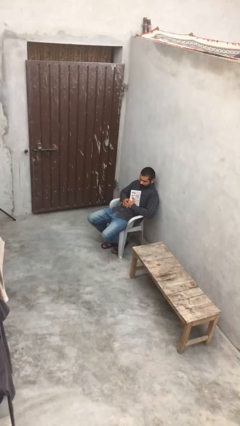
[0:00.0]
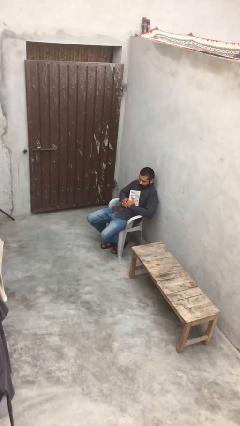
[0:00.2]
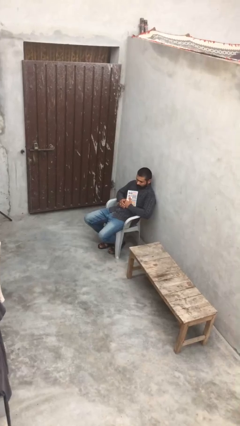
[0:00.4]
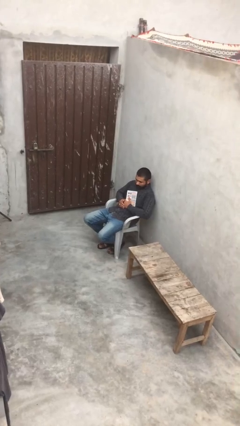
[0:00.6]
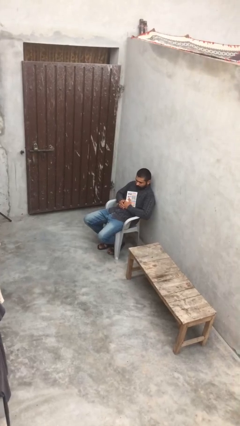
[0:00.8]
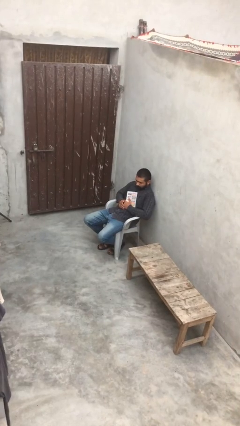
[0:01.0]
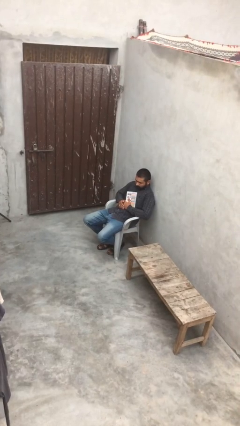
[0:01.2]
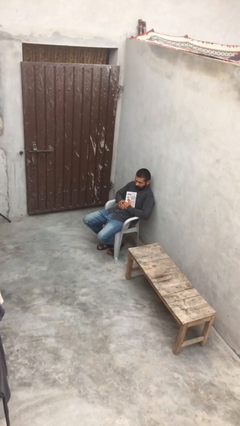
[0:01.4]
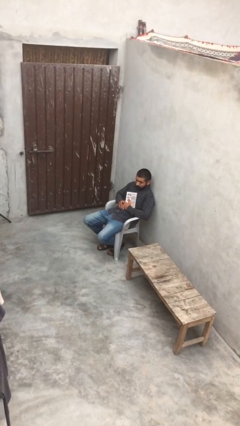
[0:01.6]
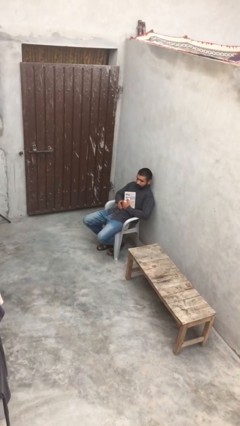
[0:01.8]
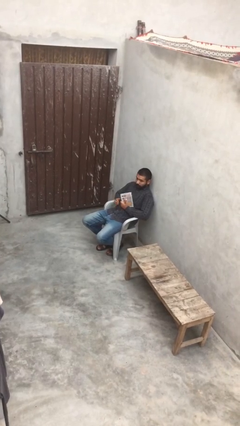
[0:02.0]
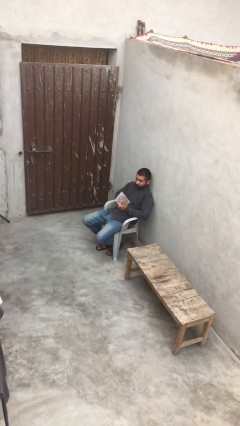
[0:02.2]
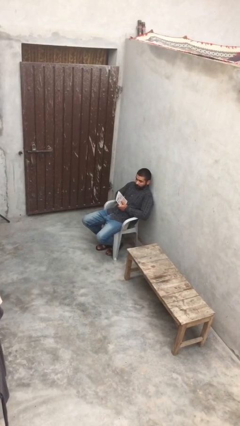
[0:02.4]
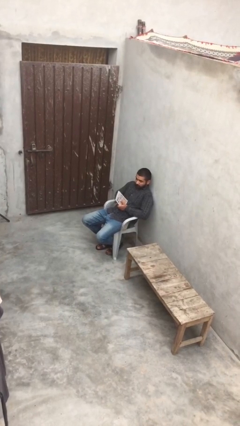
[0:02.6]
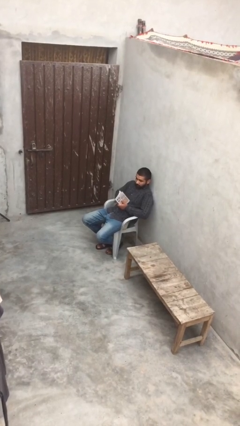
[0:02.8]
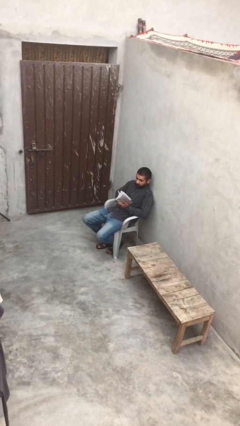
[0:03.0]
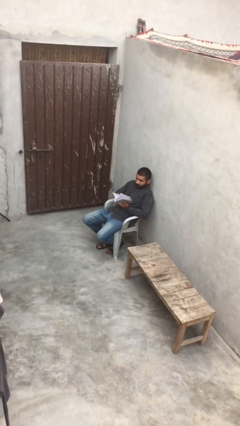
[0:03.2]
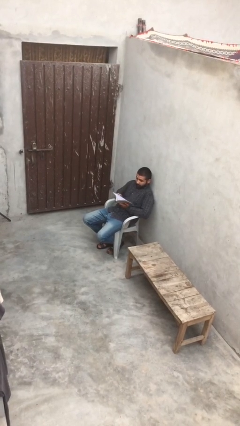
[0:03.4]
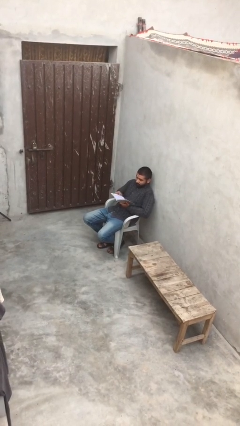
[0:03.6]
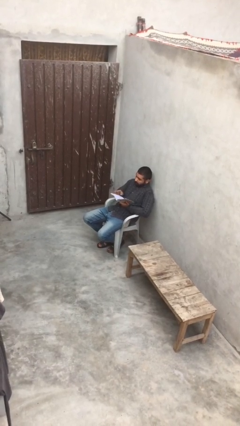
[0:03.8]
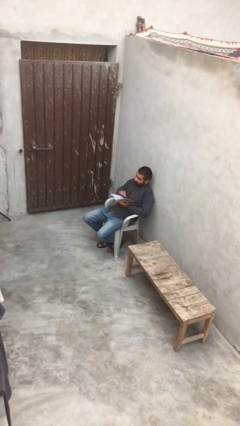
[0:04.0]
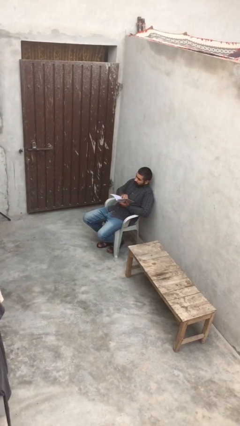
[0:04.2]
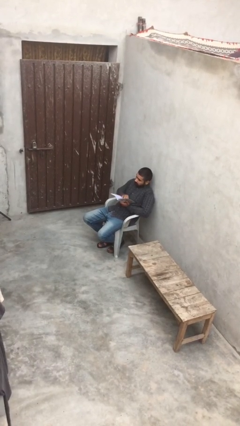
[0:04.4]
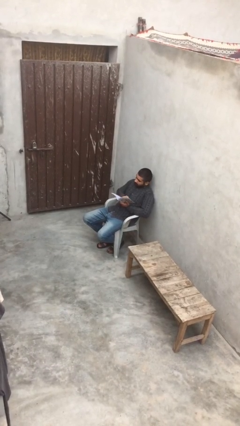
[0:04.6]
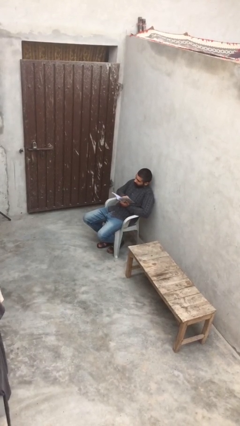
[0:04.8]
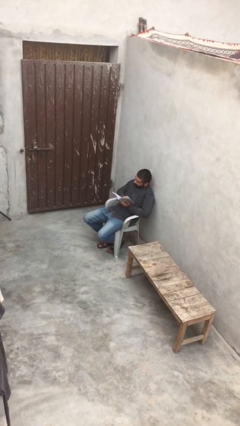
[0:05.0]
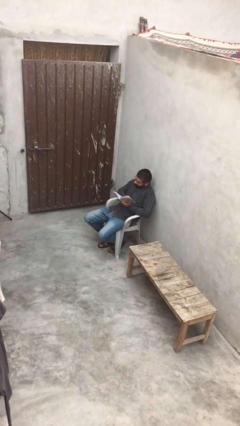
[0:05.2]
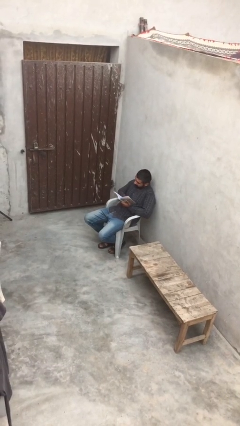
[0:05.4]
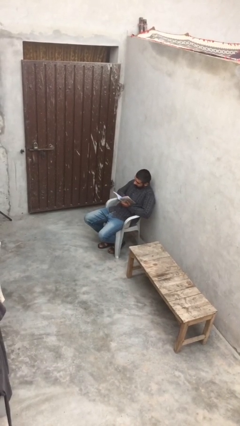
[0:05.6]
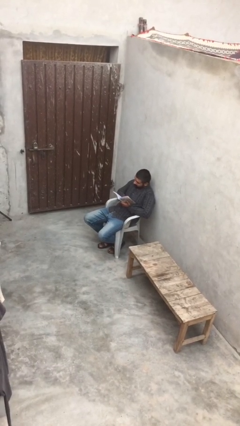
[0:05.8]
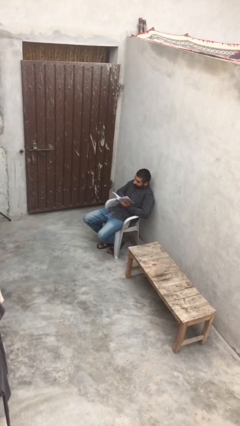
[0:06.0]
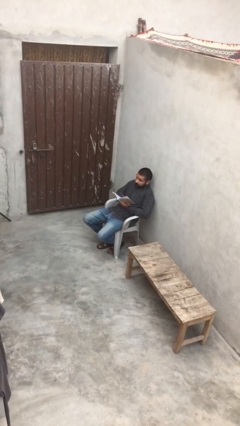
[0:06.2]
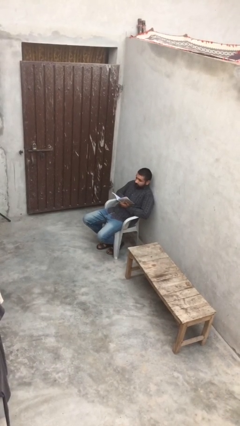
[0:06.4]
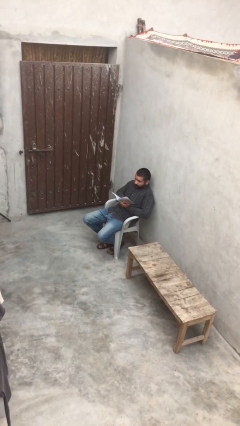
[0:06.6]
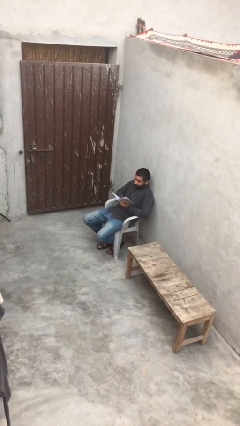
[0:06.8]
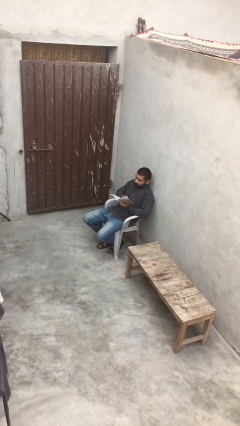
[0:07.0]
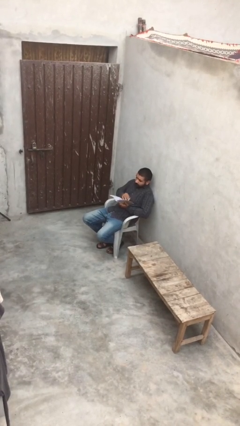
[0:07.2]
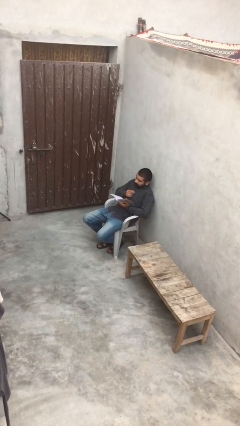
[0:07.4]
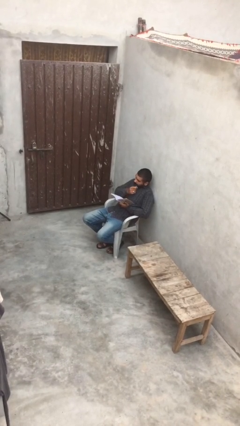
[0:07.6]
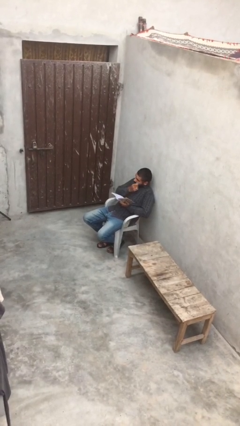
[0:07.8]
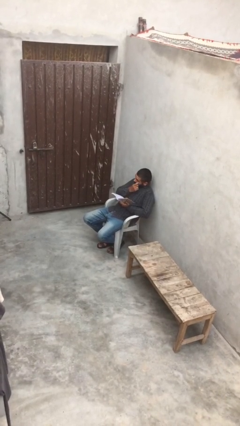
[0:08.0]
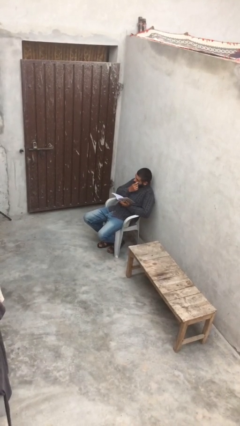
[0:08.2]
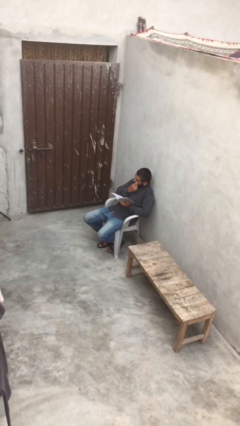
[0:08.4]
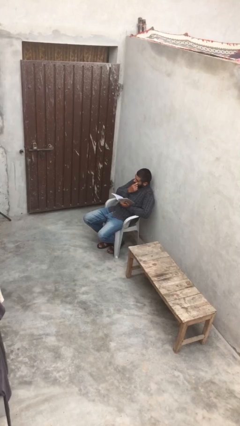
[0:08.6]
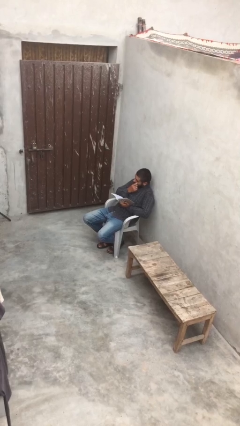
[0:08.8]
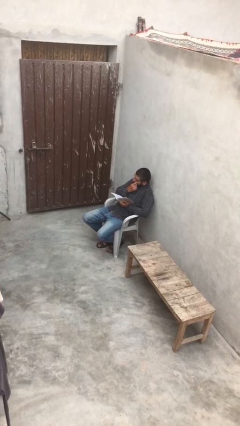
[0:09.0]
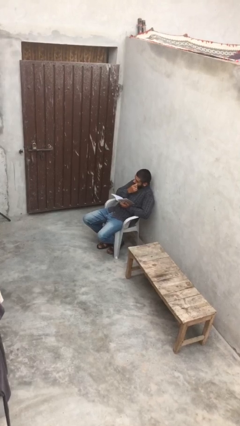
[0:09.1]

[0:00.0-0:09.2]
person reads document

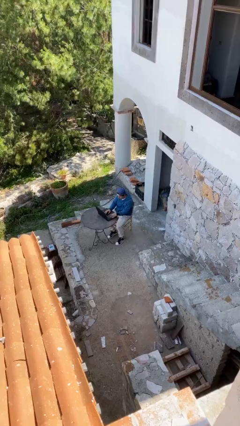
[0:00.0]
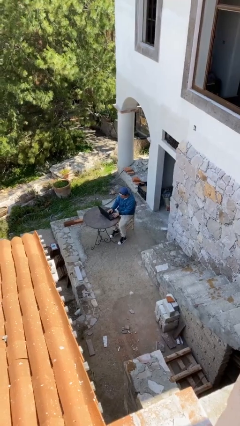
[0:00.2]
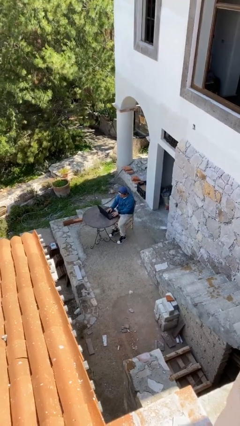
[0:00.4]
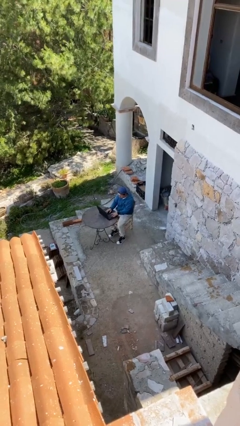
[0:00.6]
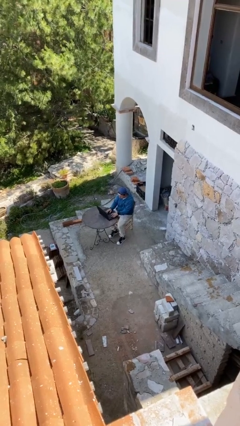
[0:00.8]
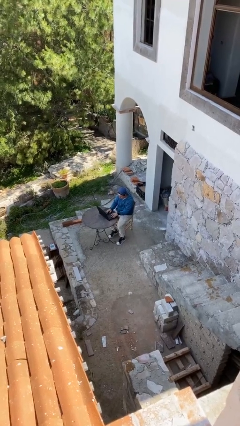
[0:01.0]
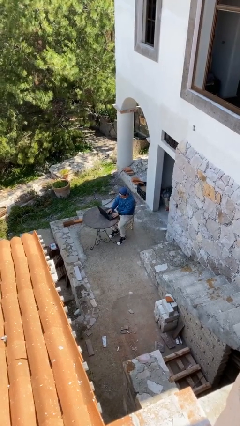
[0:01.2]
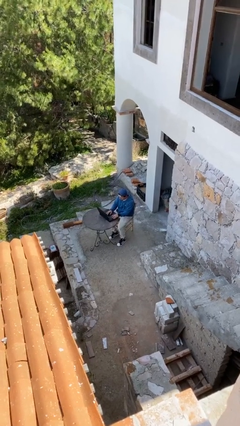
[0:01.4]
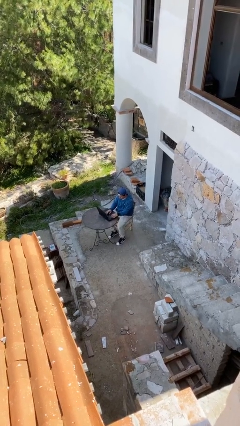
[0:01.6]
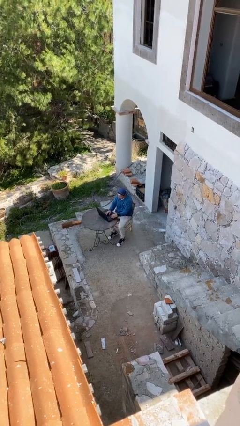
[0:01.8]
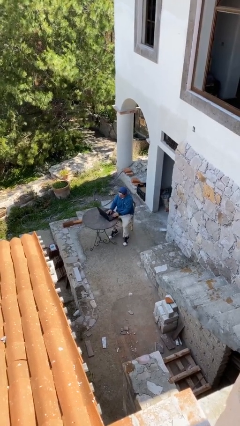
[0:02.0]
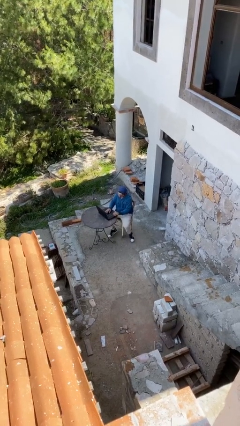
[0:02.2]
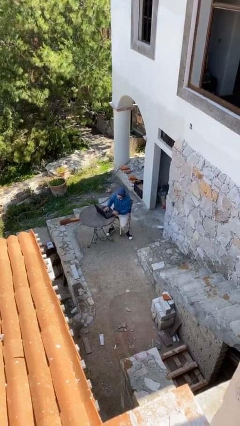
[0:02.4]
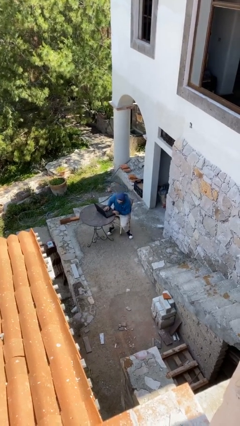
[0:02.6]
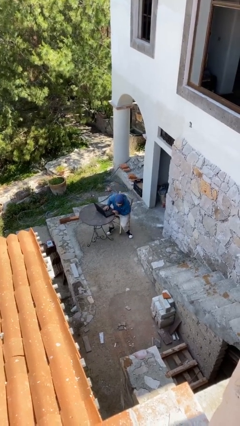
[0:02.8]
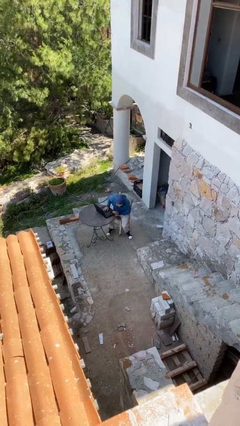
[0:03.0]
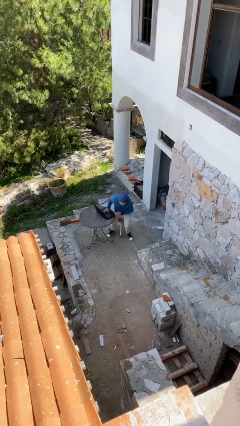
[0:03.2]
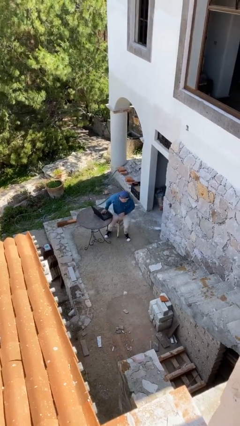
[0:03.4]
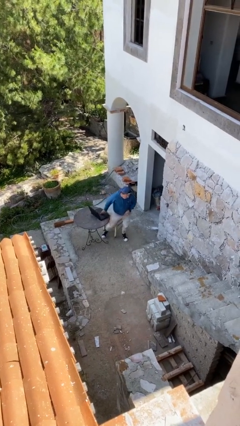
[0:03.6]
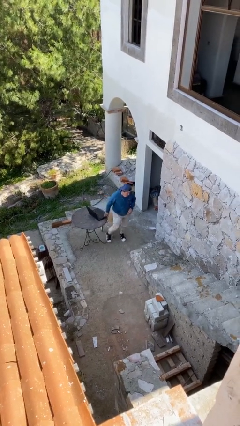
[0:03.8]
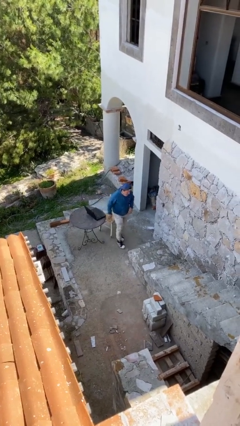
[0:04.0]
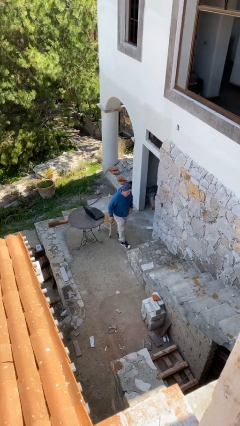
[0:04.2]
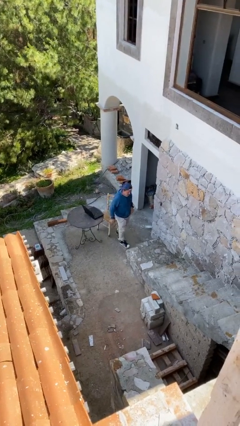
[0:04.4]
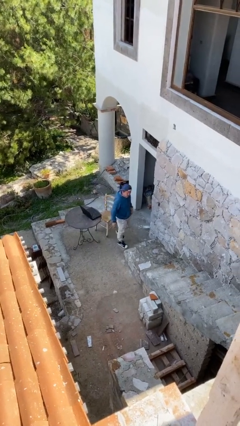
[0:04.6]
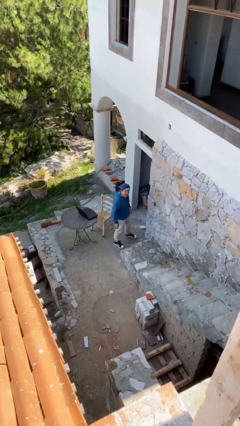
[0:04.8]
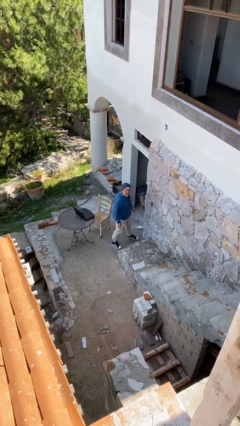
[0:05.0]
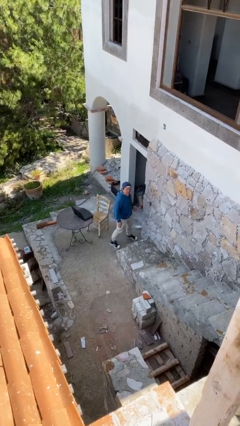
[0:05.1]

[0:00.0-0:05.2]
person stands up

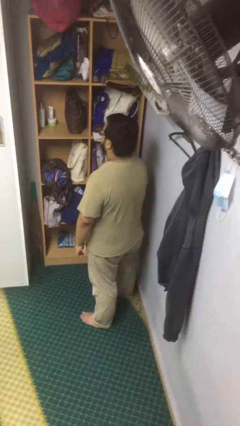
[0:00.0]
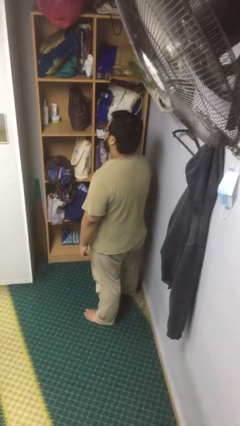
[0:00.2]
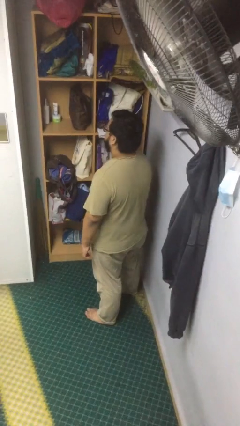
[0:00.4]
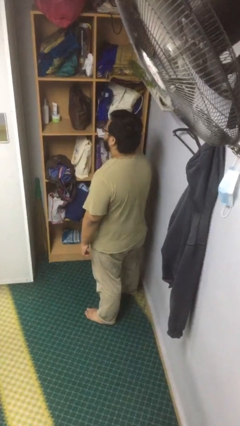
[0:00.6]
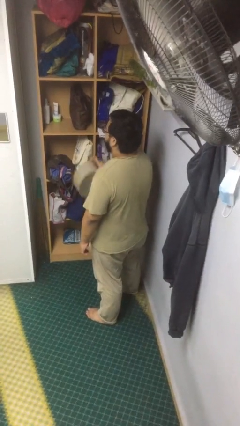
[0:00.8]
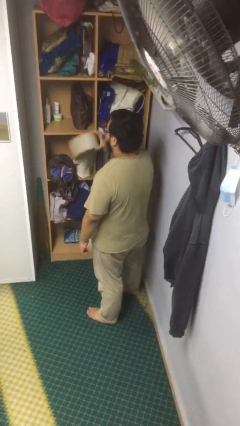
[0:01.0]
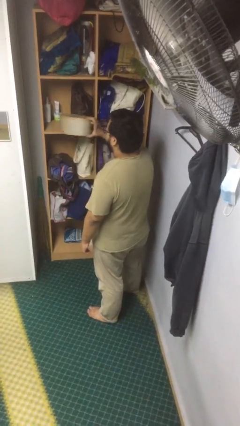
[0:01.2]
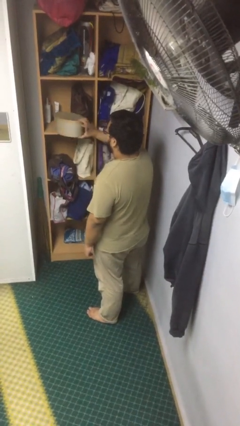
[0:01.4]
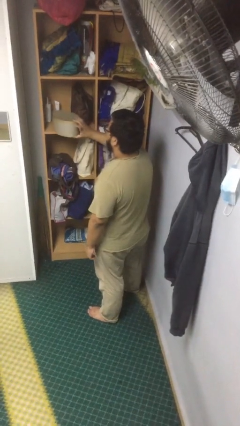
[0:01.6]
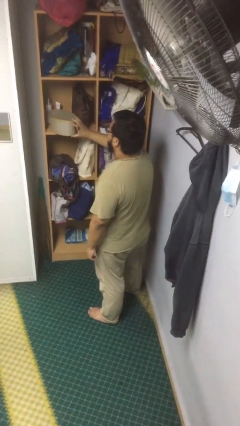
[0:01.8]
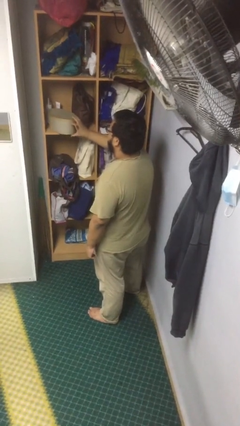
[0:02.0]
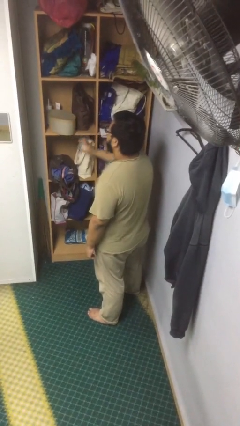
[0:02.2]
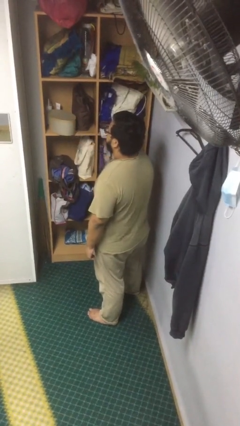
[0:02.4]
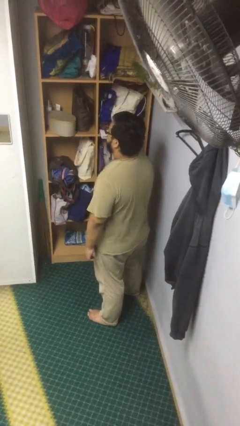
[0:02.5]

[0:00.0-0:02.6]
person puts down object into cabinet

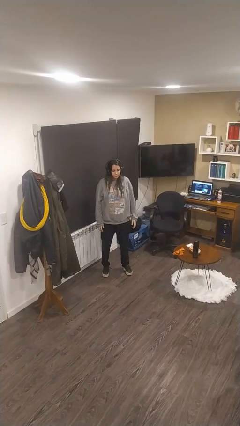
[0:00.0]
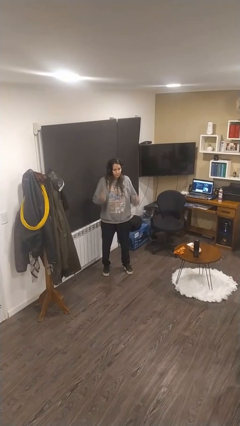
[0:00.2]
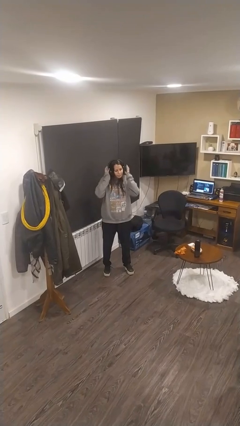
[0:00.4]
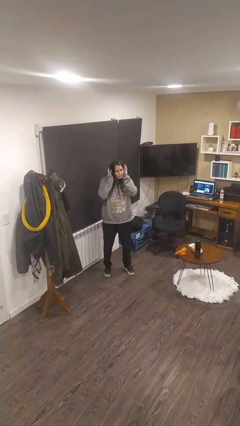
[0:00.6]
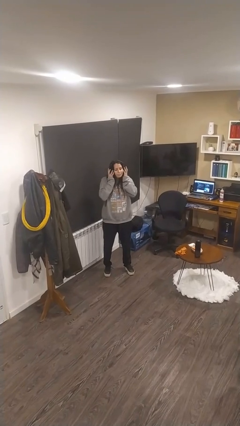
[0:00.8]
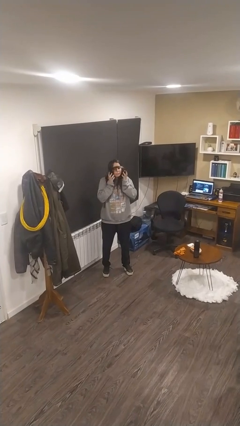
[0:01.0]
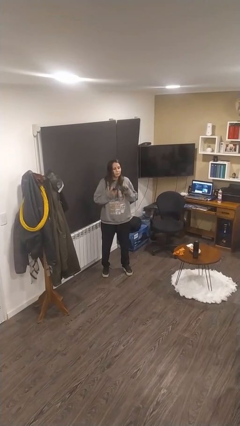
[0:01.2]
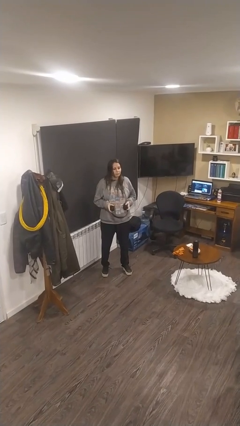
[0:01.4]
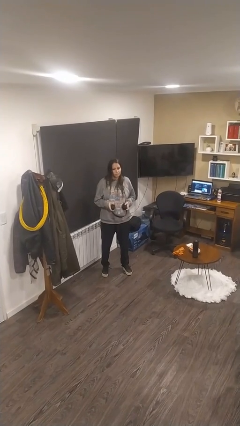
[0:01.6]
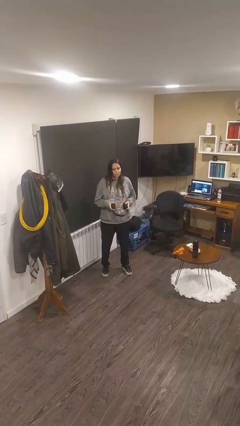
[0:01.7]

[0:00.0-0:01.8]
person takes off headphones
